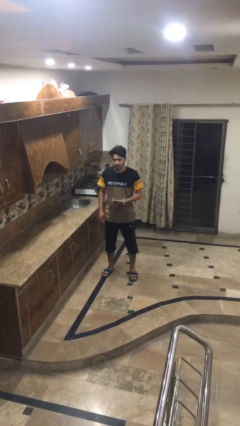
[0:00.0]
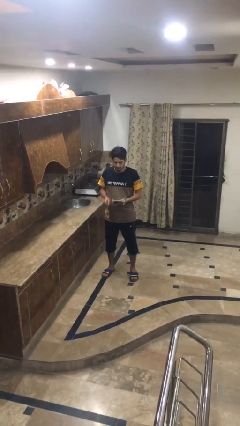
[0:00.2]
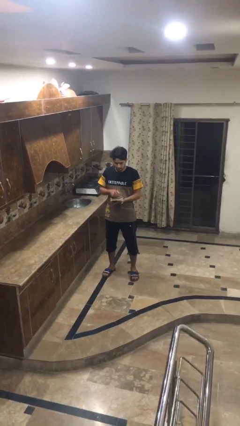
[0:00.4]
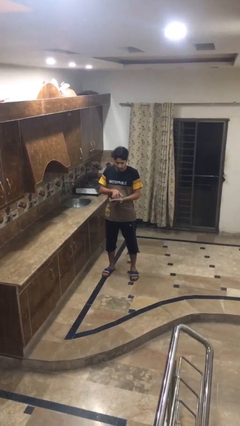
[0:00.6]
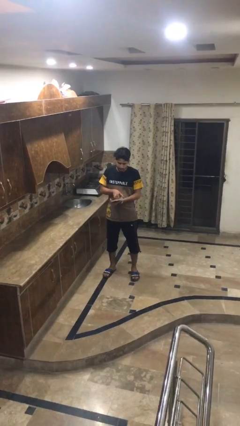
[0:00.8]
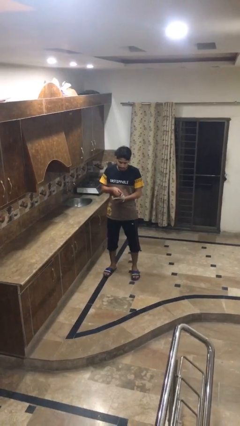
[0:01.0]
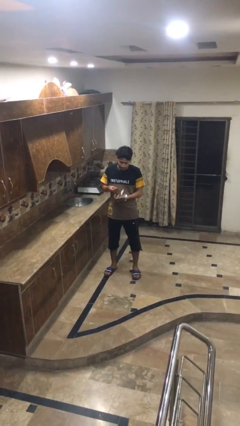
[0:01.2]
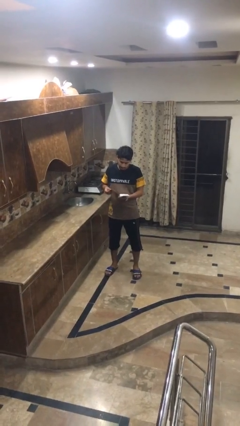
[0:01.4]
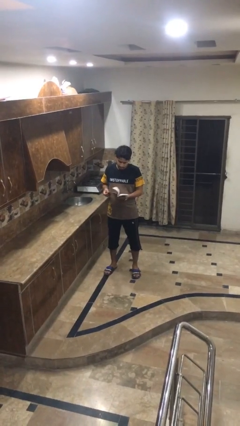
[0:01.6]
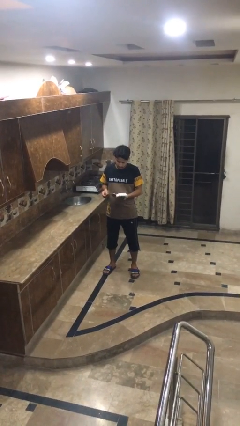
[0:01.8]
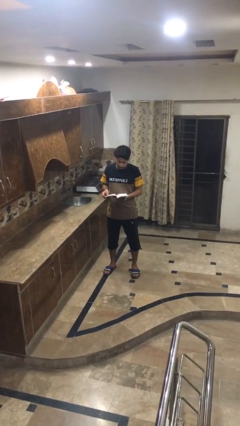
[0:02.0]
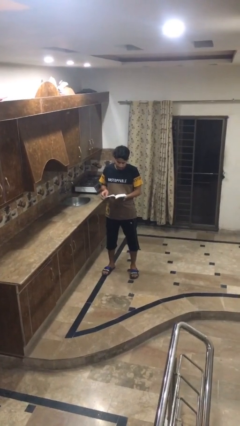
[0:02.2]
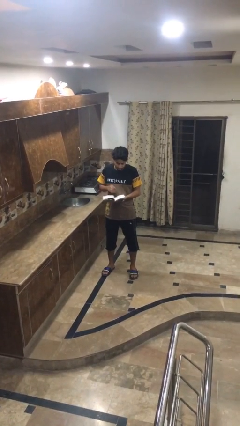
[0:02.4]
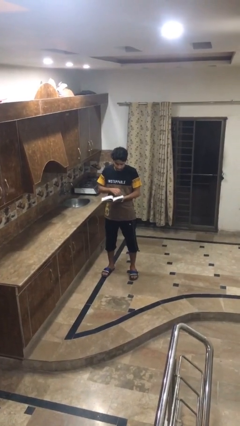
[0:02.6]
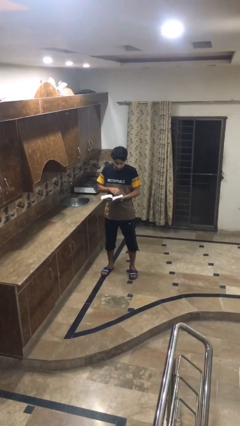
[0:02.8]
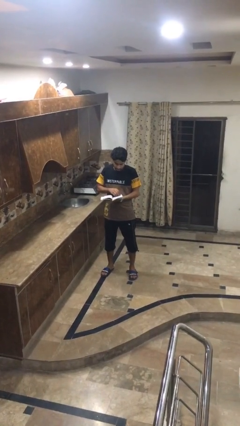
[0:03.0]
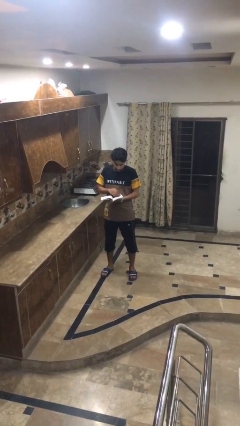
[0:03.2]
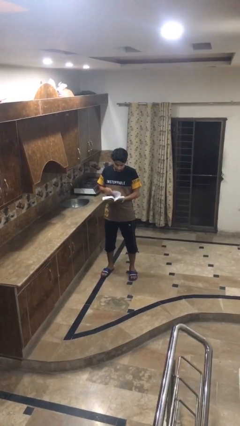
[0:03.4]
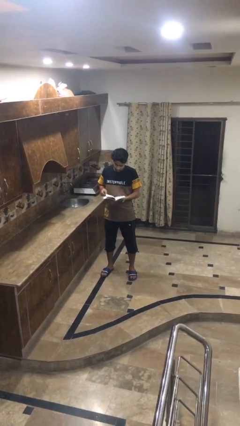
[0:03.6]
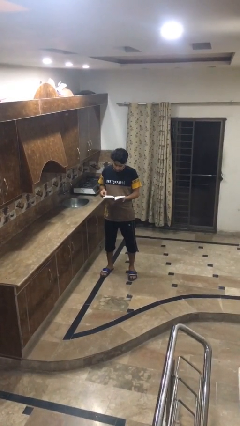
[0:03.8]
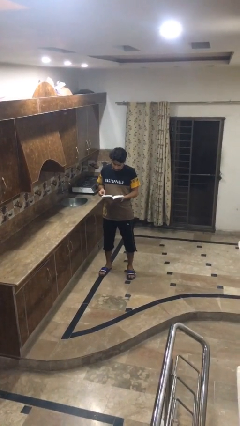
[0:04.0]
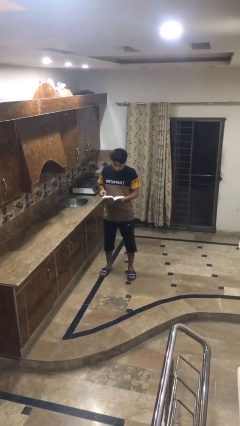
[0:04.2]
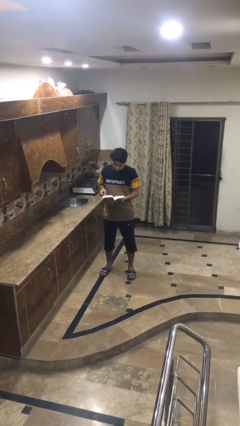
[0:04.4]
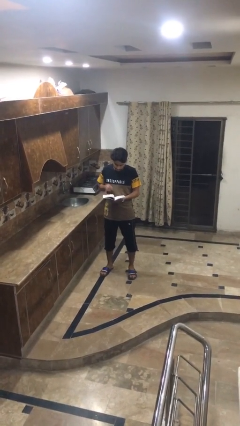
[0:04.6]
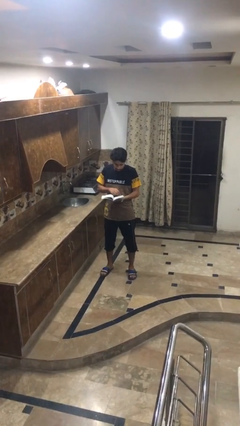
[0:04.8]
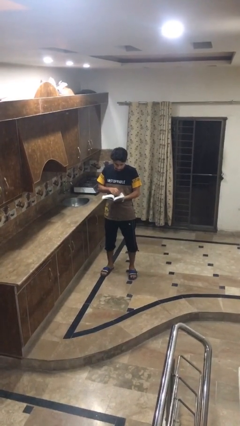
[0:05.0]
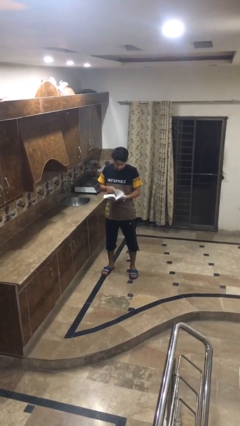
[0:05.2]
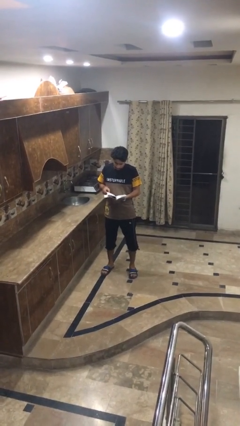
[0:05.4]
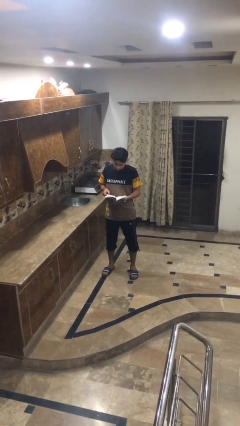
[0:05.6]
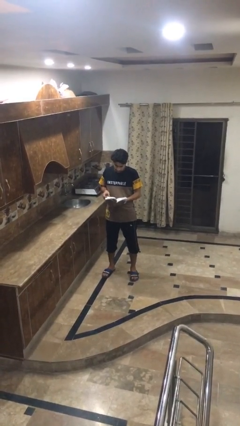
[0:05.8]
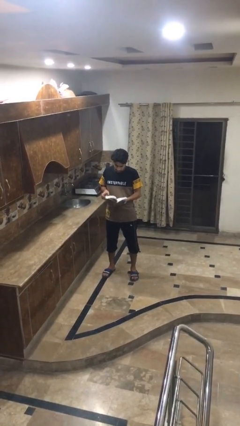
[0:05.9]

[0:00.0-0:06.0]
person reads book

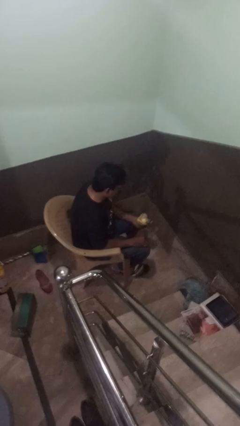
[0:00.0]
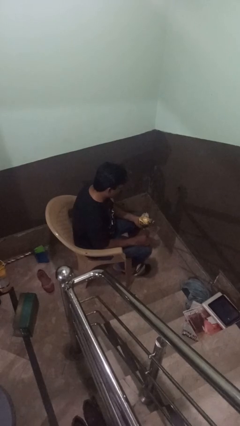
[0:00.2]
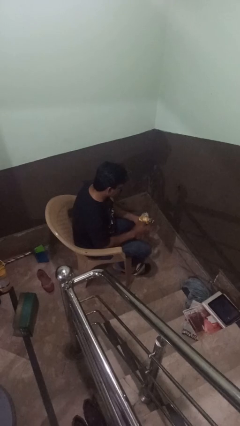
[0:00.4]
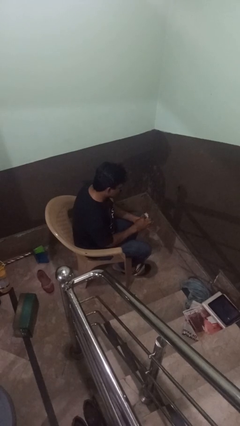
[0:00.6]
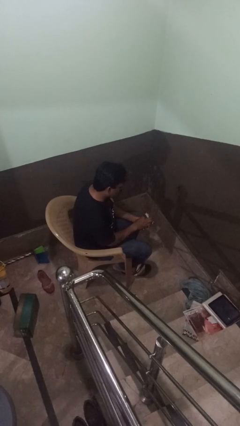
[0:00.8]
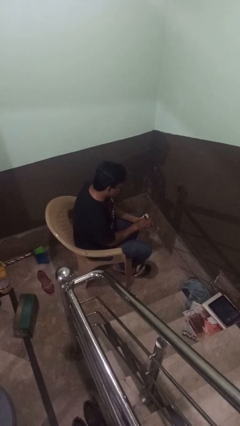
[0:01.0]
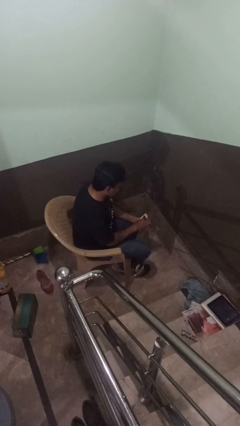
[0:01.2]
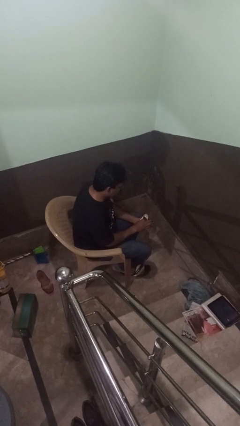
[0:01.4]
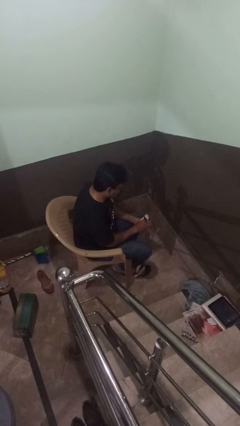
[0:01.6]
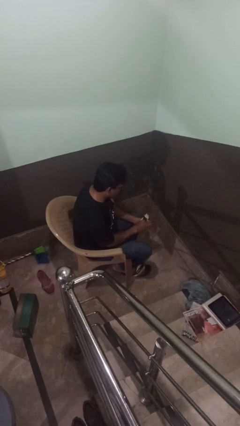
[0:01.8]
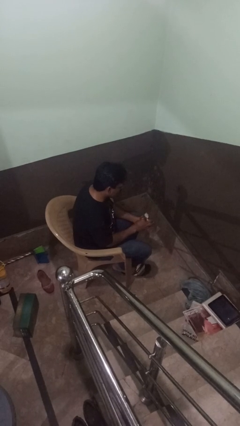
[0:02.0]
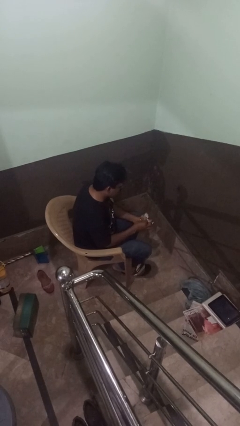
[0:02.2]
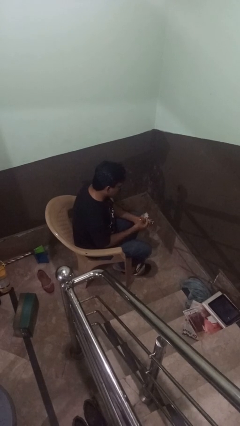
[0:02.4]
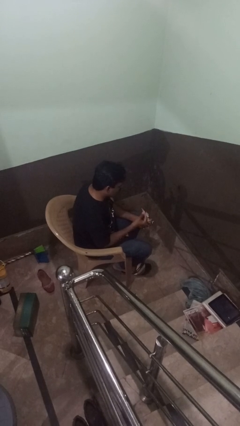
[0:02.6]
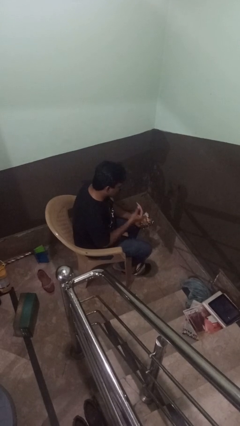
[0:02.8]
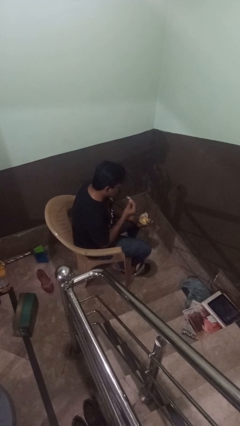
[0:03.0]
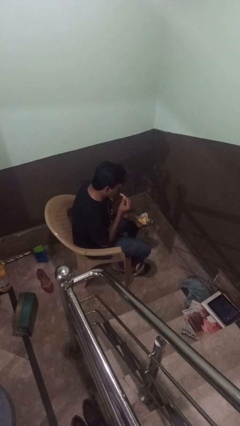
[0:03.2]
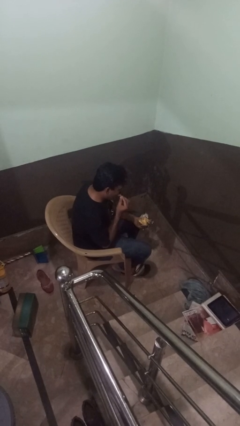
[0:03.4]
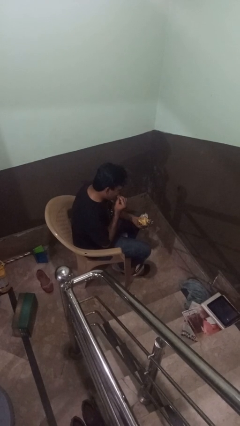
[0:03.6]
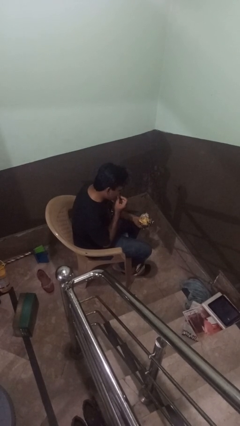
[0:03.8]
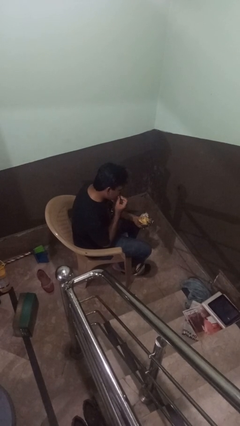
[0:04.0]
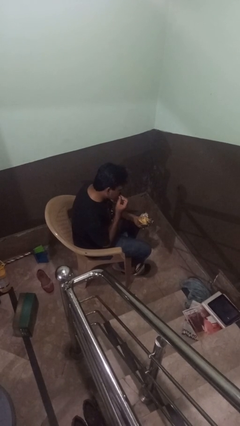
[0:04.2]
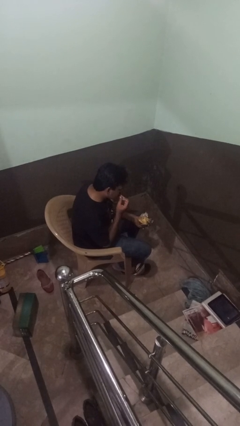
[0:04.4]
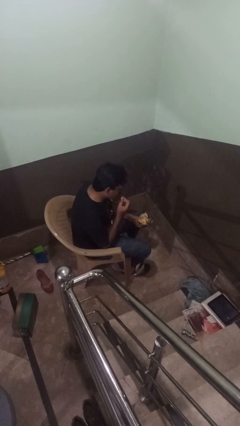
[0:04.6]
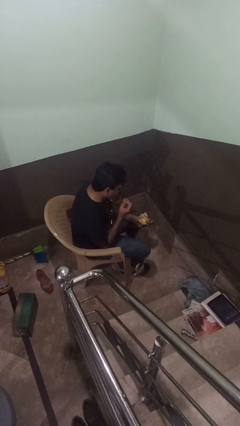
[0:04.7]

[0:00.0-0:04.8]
person eats snack from bag

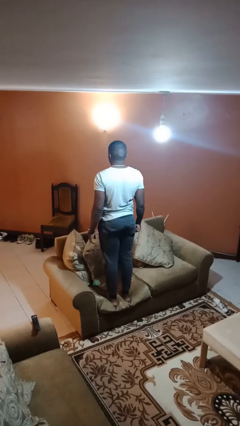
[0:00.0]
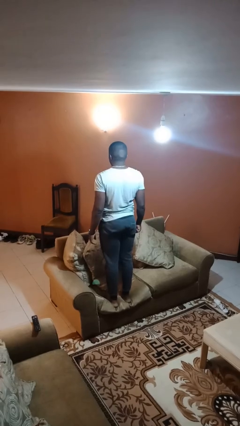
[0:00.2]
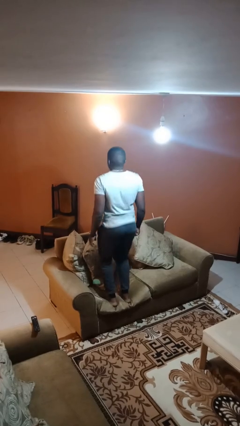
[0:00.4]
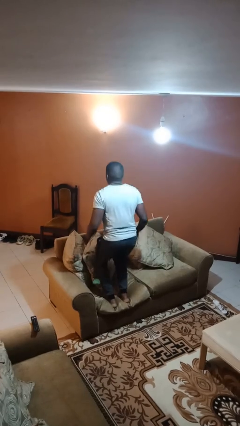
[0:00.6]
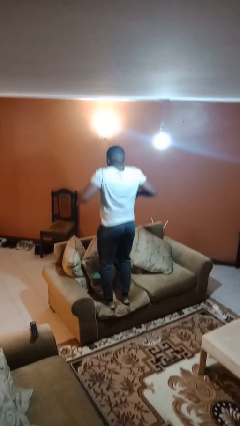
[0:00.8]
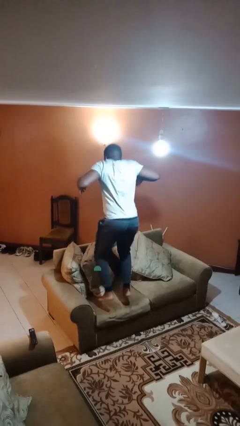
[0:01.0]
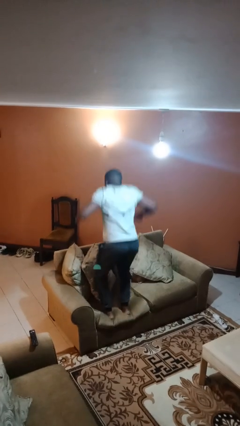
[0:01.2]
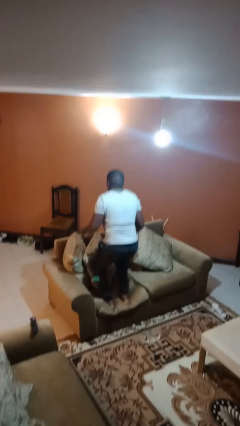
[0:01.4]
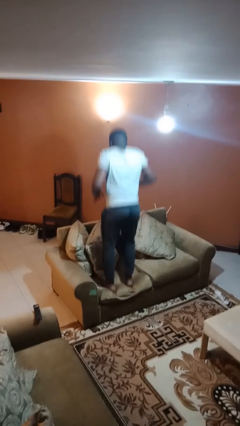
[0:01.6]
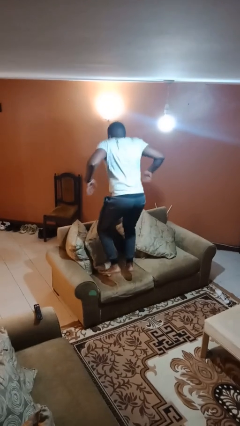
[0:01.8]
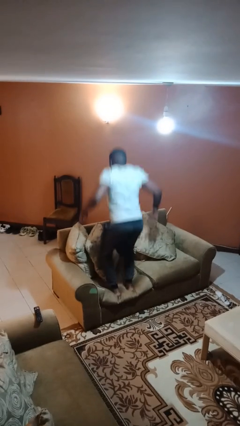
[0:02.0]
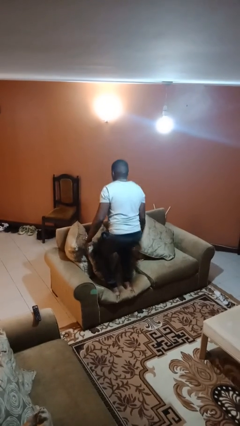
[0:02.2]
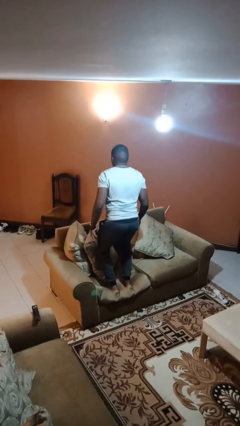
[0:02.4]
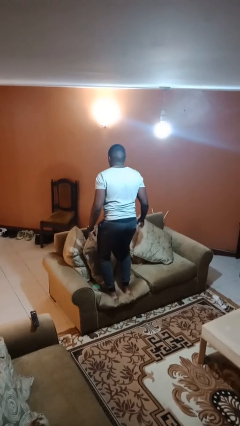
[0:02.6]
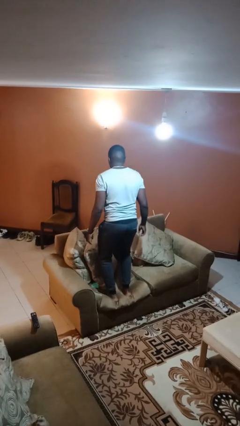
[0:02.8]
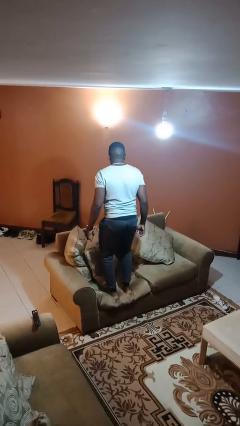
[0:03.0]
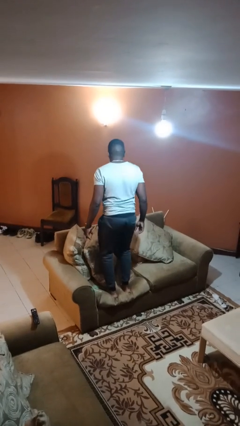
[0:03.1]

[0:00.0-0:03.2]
person jumps on couch

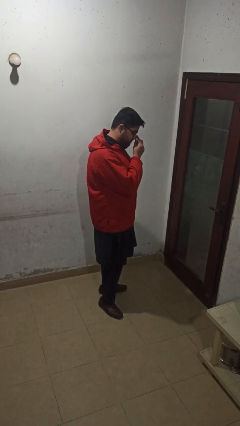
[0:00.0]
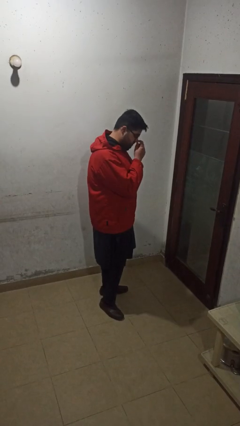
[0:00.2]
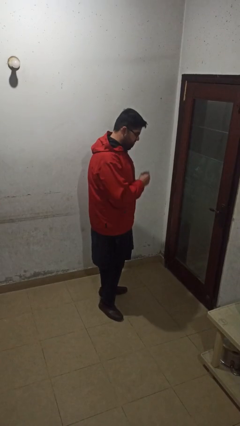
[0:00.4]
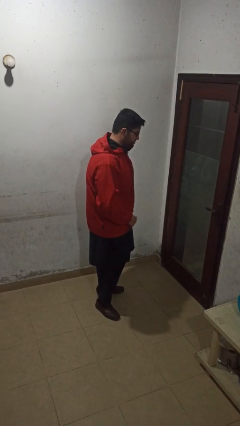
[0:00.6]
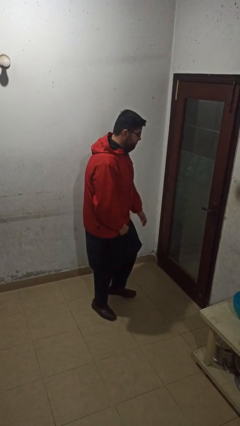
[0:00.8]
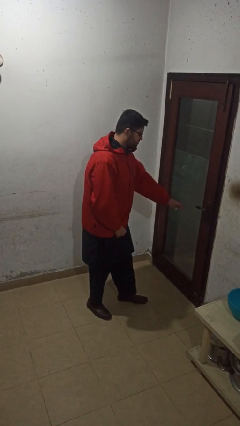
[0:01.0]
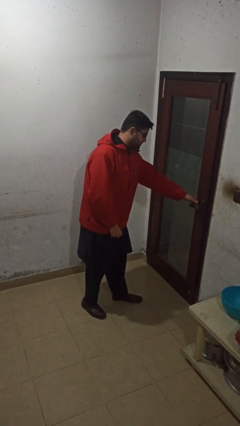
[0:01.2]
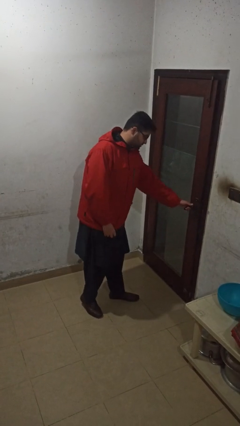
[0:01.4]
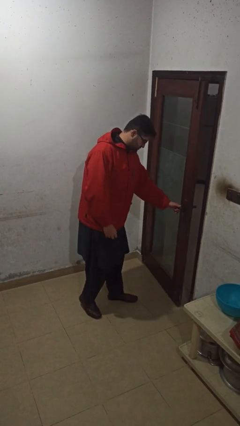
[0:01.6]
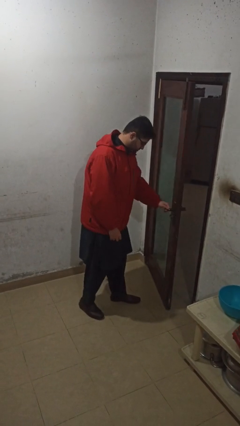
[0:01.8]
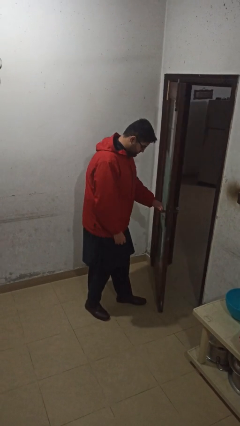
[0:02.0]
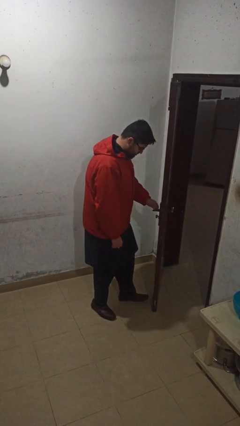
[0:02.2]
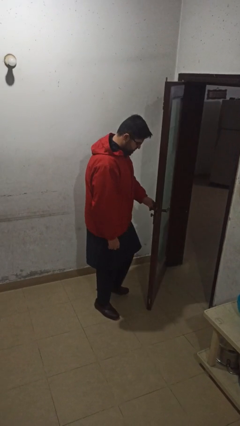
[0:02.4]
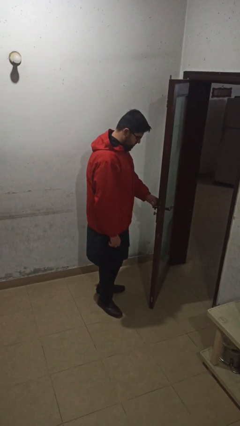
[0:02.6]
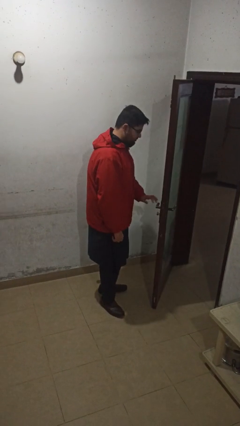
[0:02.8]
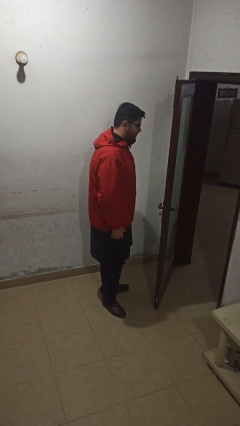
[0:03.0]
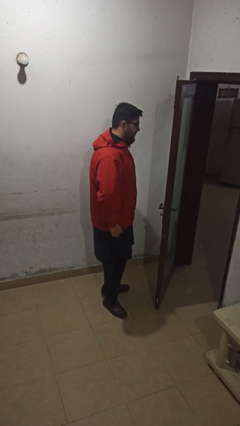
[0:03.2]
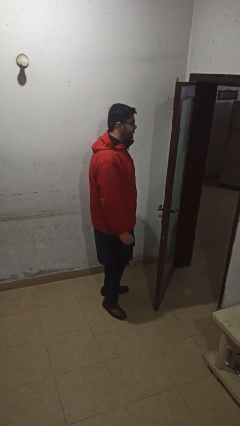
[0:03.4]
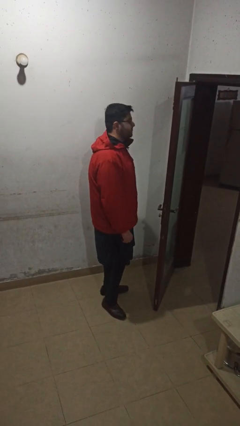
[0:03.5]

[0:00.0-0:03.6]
person opens facility door
